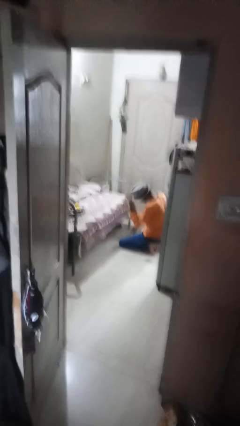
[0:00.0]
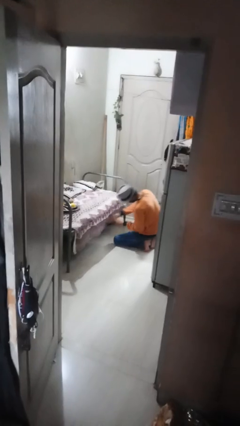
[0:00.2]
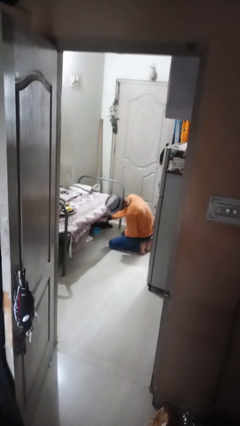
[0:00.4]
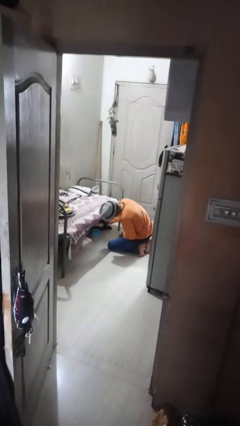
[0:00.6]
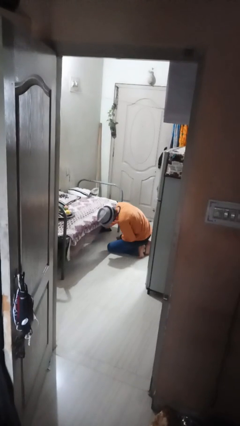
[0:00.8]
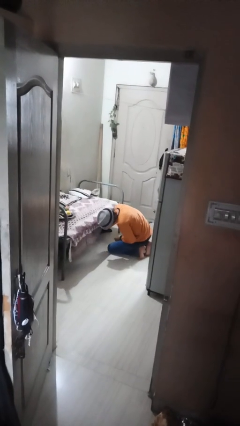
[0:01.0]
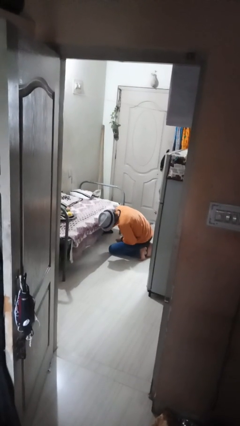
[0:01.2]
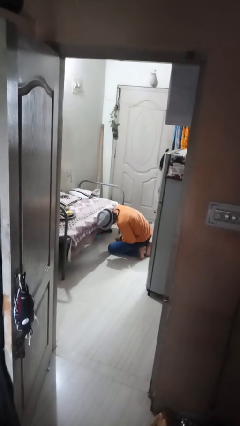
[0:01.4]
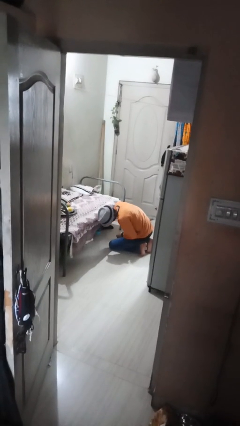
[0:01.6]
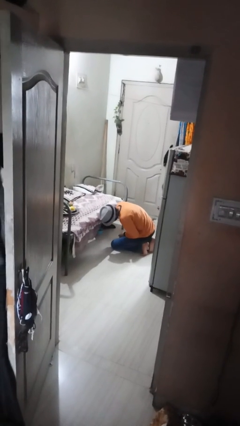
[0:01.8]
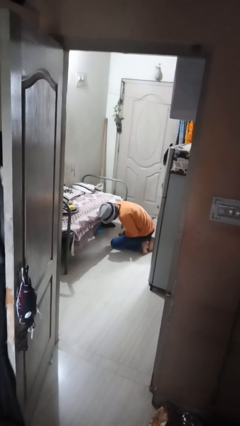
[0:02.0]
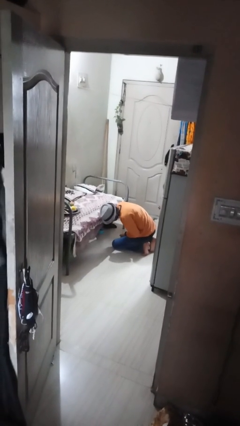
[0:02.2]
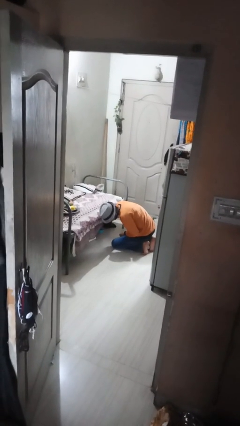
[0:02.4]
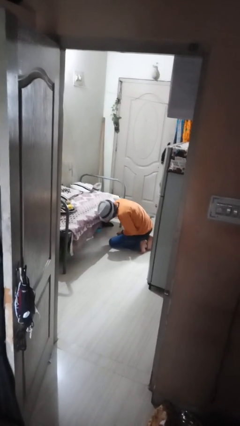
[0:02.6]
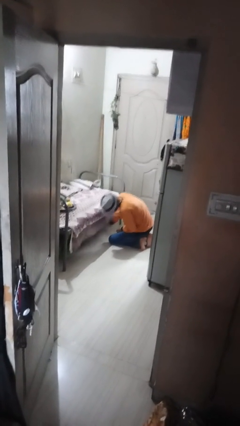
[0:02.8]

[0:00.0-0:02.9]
person searches under bed

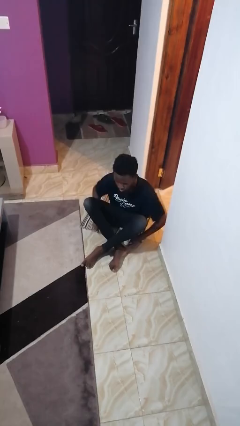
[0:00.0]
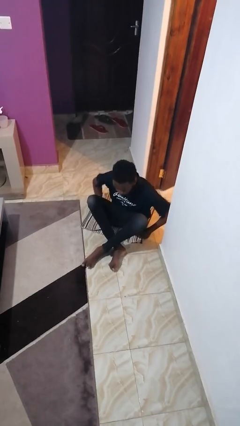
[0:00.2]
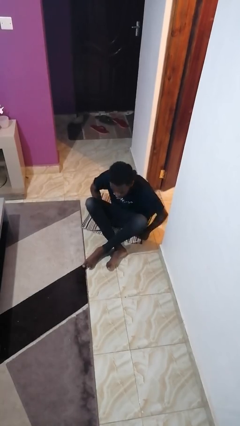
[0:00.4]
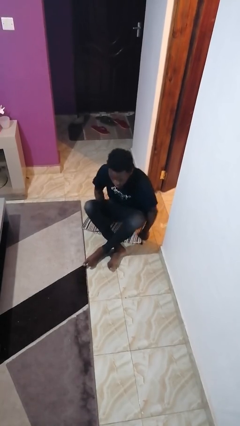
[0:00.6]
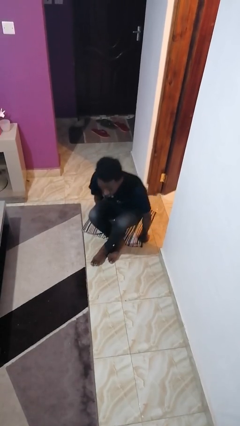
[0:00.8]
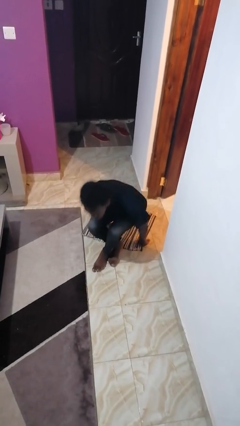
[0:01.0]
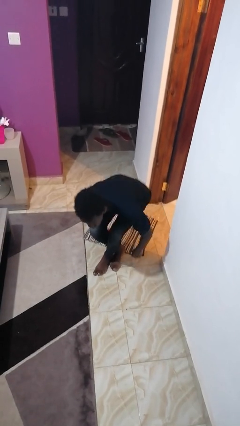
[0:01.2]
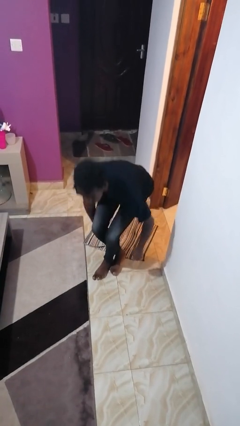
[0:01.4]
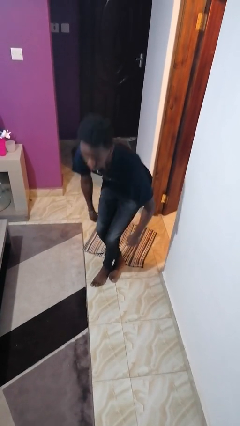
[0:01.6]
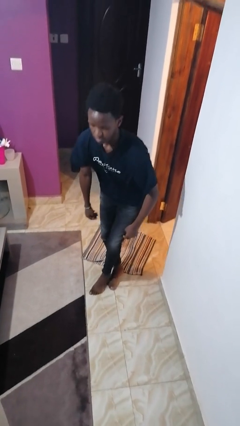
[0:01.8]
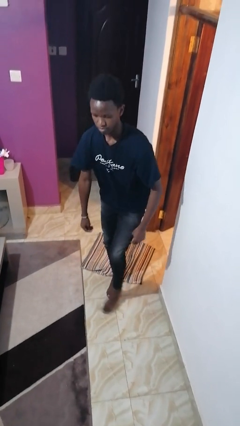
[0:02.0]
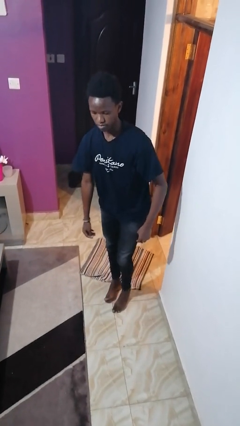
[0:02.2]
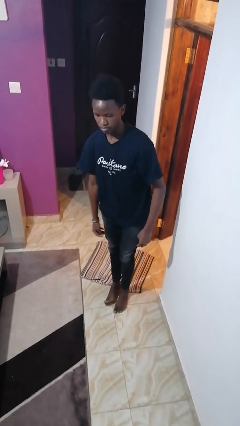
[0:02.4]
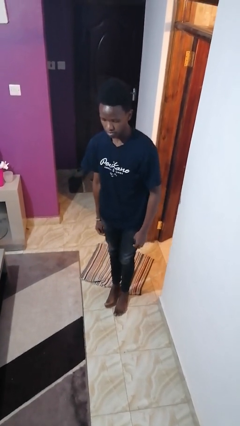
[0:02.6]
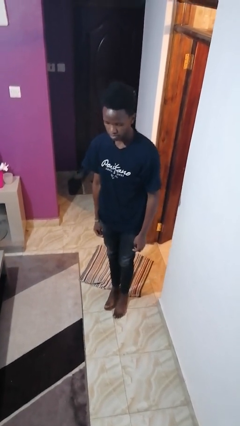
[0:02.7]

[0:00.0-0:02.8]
person stands up from floor

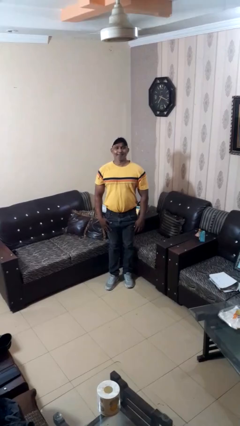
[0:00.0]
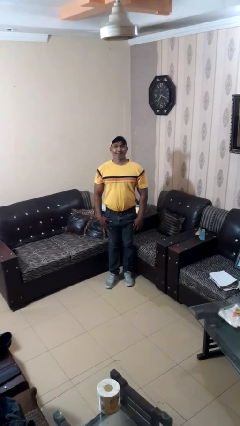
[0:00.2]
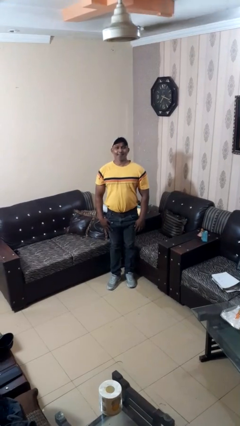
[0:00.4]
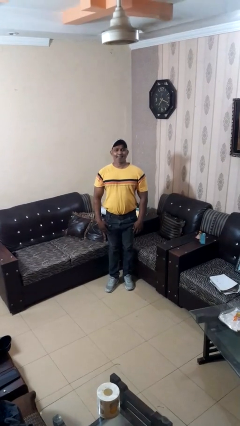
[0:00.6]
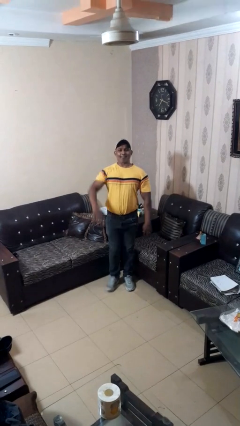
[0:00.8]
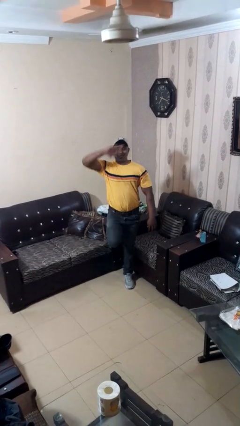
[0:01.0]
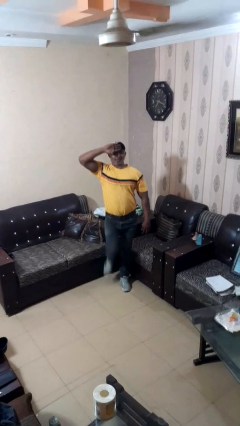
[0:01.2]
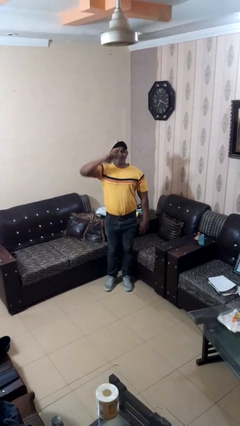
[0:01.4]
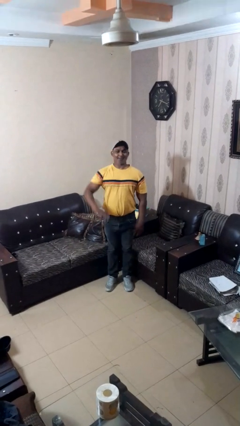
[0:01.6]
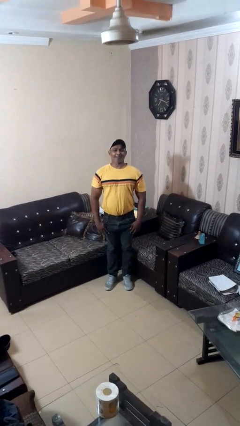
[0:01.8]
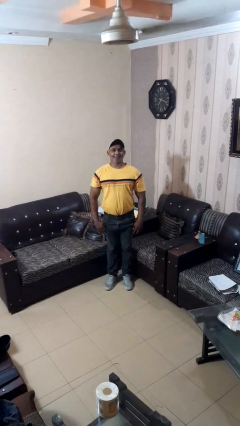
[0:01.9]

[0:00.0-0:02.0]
person salutes

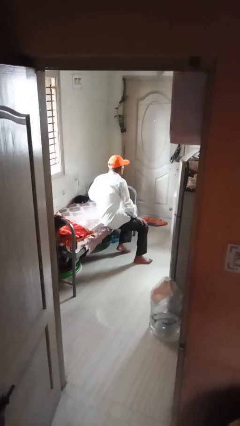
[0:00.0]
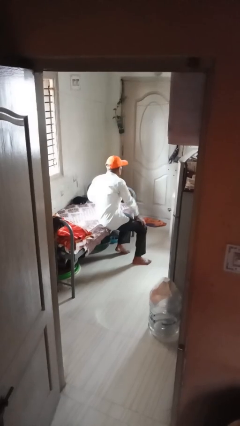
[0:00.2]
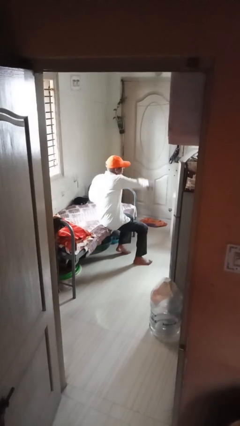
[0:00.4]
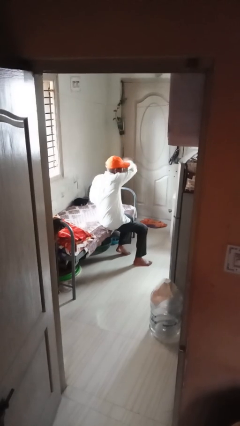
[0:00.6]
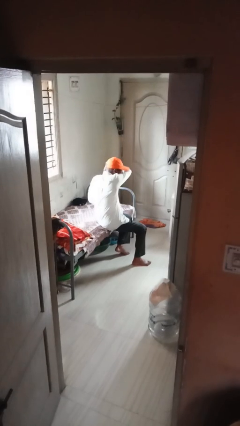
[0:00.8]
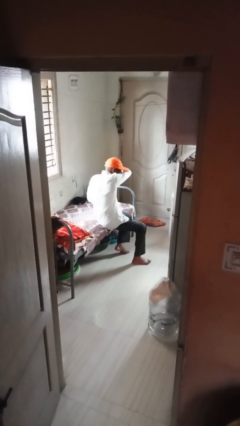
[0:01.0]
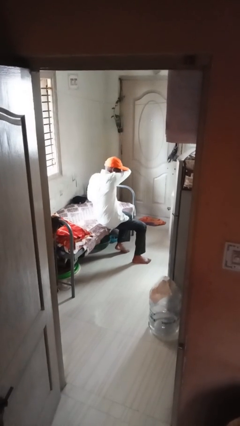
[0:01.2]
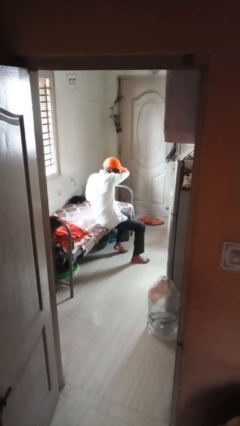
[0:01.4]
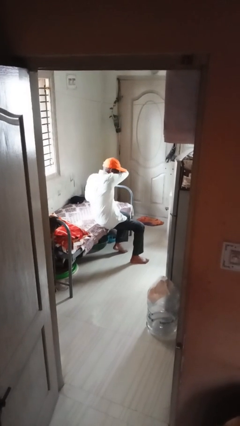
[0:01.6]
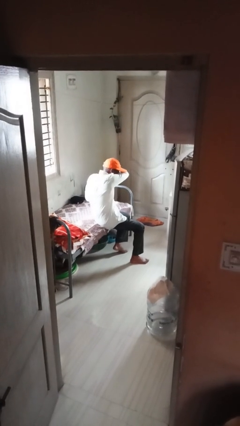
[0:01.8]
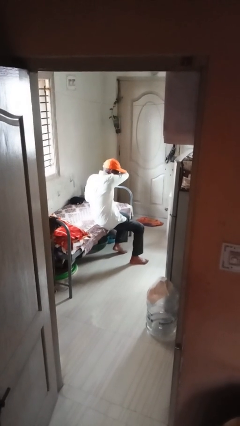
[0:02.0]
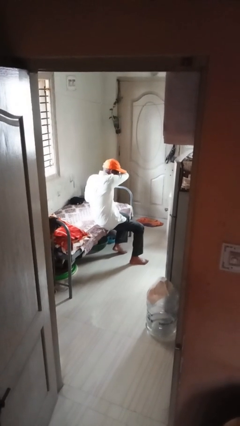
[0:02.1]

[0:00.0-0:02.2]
person sneezes into arm

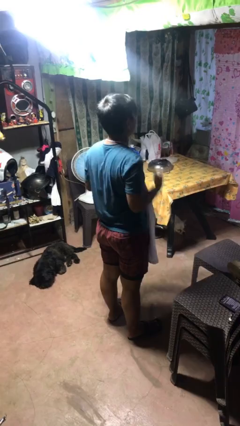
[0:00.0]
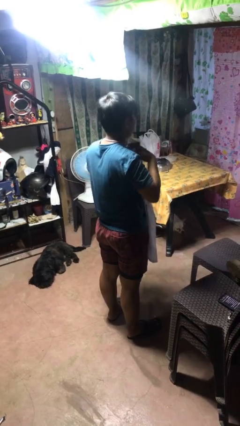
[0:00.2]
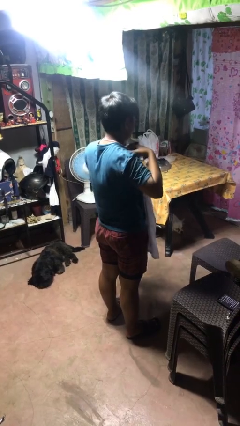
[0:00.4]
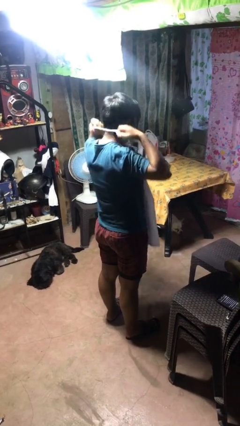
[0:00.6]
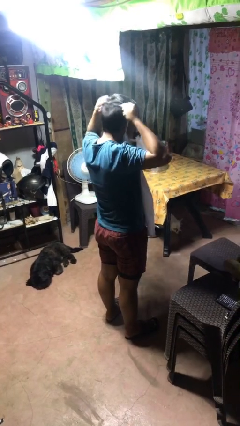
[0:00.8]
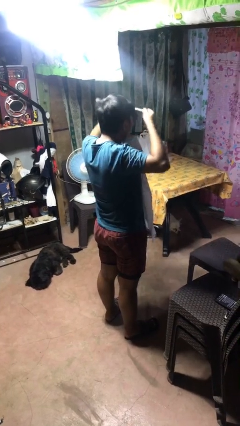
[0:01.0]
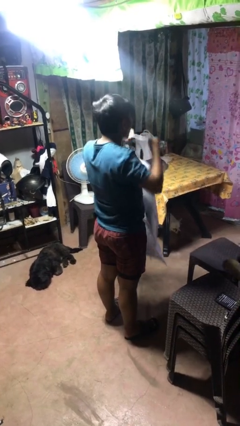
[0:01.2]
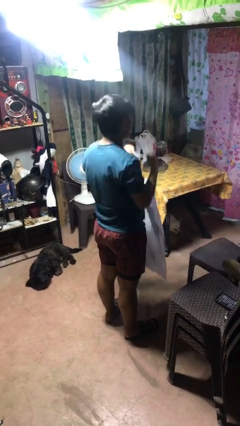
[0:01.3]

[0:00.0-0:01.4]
person takes off apron

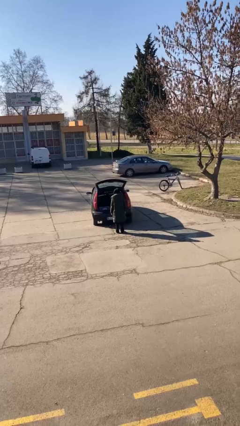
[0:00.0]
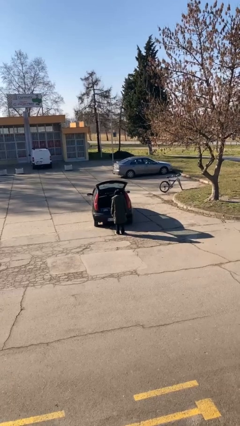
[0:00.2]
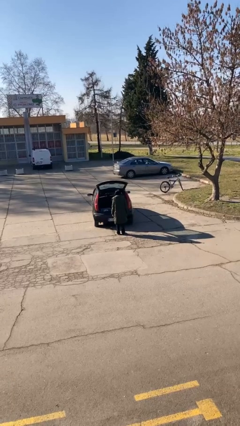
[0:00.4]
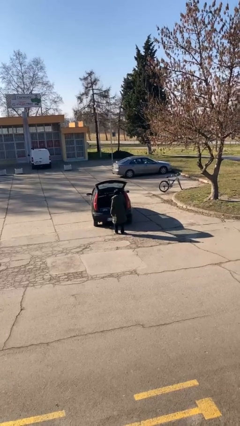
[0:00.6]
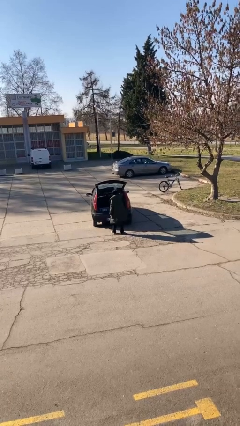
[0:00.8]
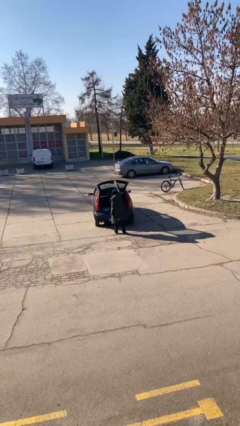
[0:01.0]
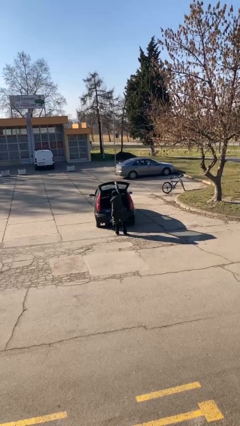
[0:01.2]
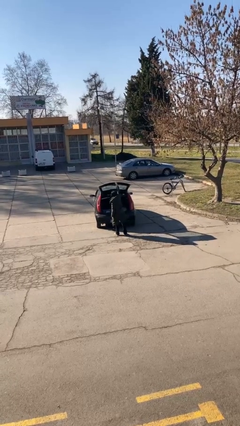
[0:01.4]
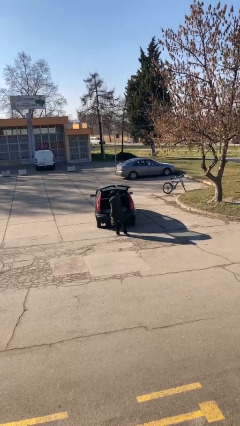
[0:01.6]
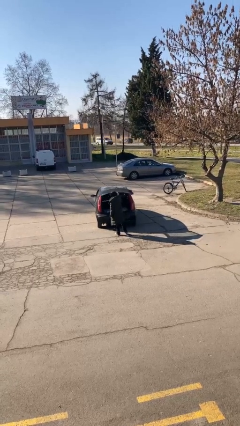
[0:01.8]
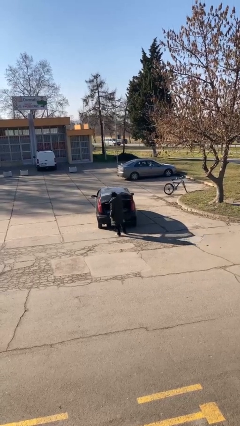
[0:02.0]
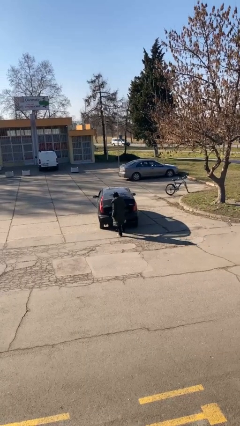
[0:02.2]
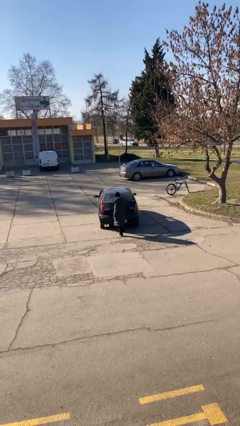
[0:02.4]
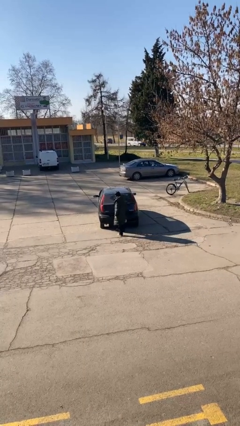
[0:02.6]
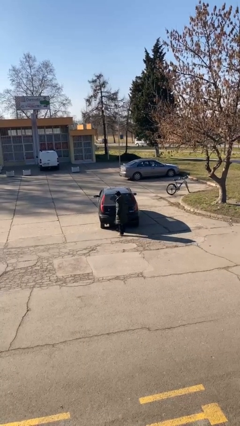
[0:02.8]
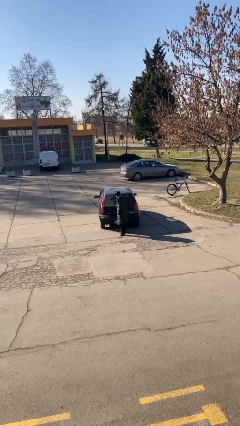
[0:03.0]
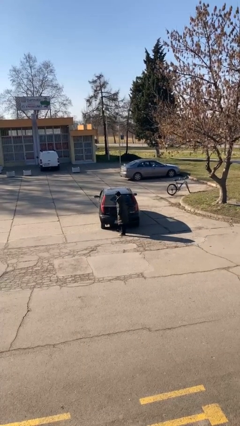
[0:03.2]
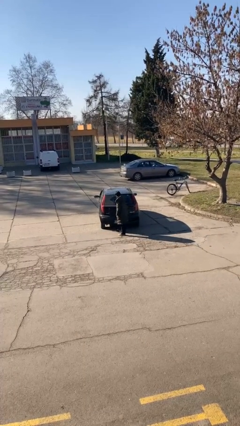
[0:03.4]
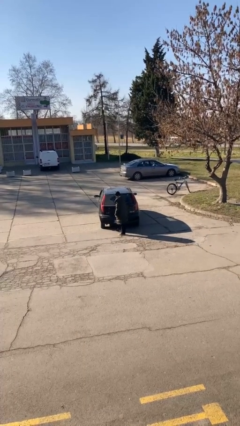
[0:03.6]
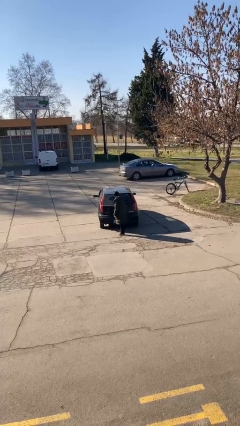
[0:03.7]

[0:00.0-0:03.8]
person closes car trunk

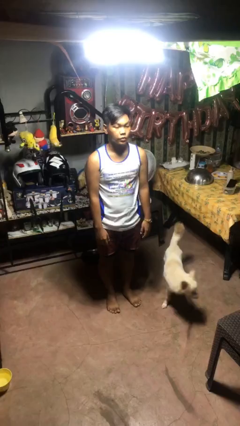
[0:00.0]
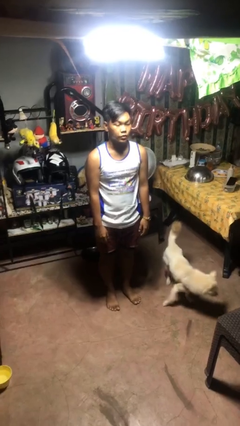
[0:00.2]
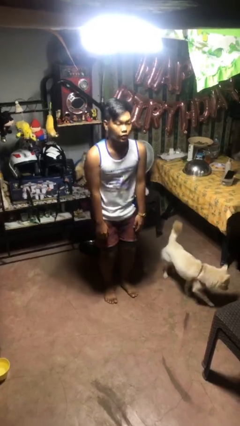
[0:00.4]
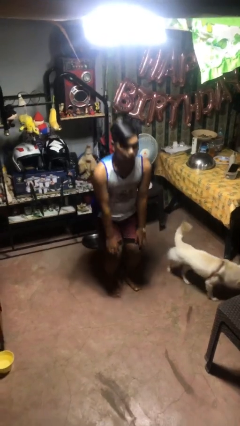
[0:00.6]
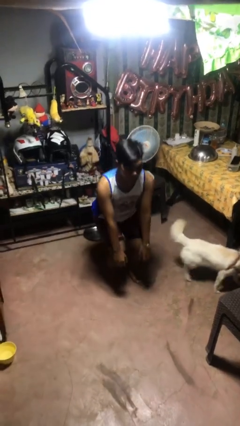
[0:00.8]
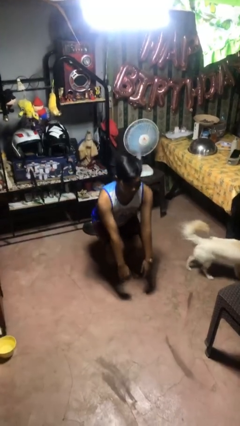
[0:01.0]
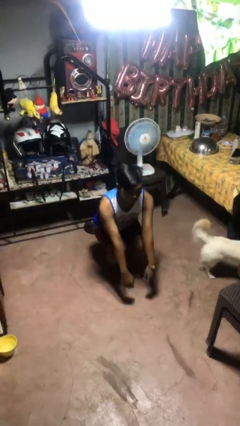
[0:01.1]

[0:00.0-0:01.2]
person squats

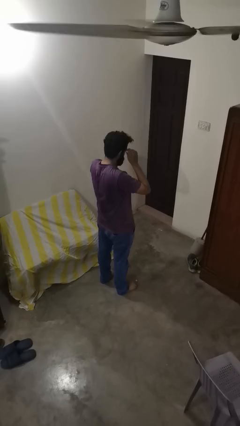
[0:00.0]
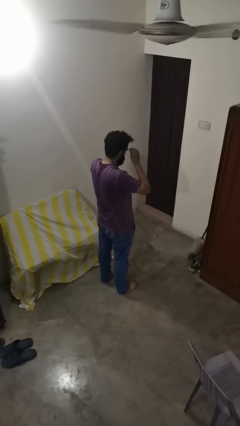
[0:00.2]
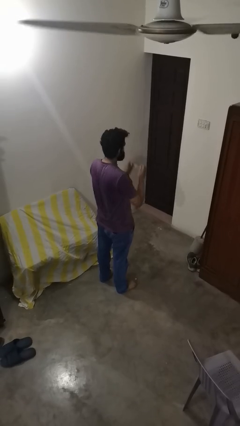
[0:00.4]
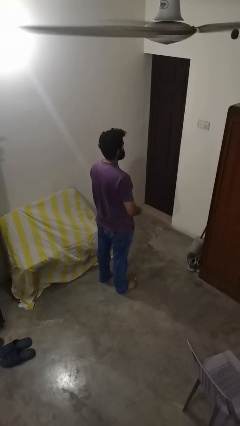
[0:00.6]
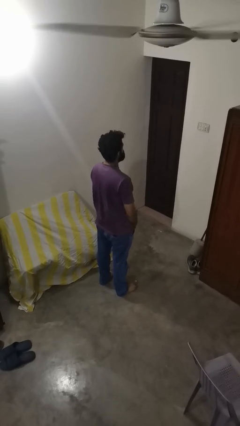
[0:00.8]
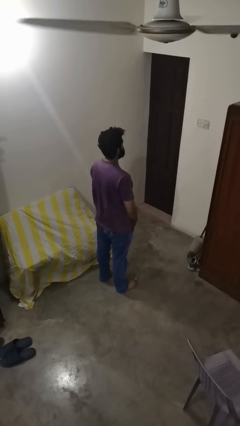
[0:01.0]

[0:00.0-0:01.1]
person takes off glasses
